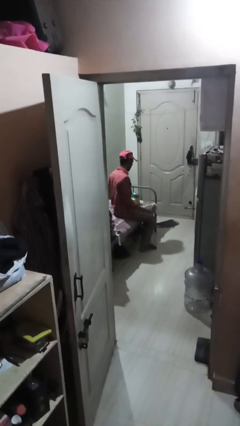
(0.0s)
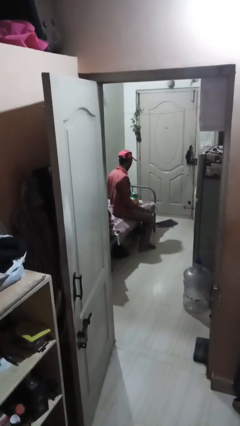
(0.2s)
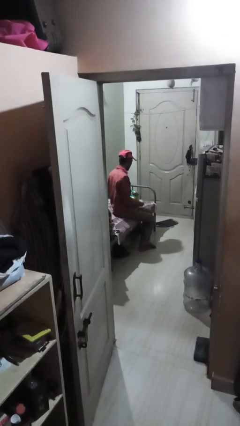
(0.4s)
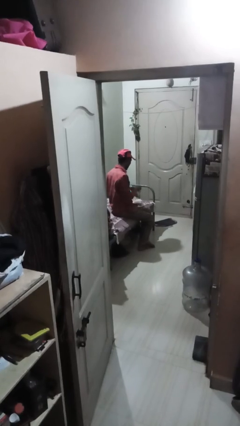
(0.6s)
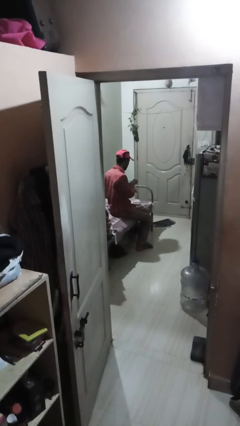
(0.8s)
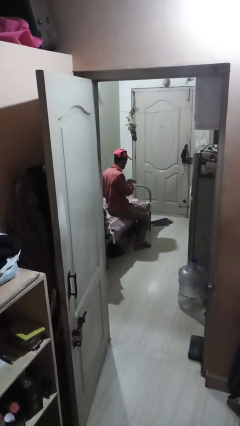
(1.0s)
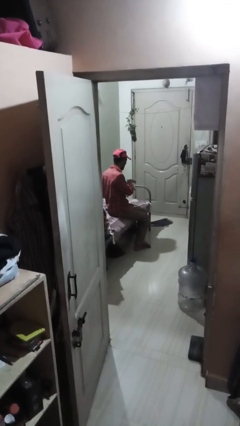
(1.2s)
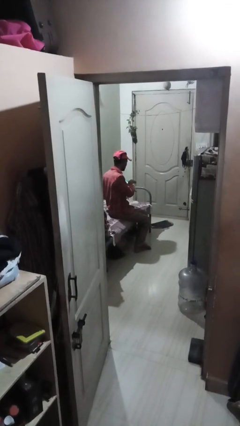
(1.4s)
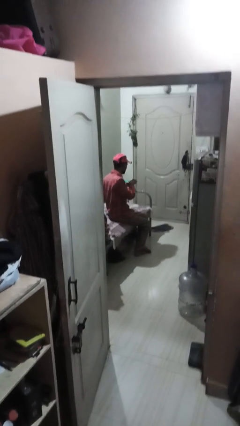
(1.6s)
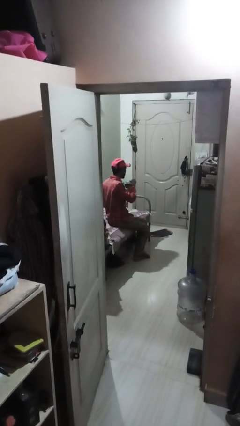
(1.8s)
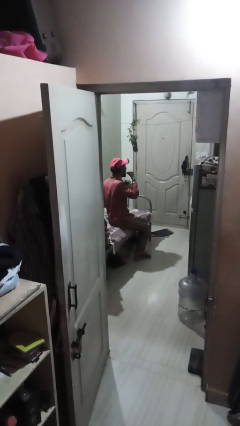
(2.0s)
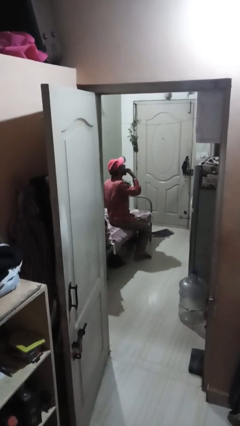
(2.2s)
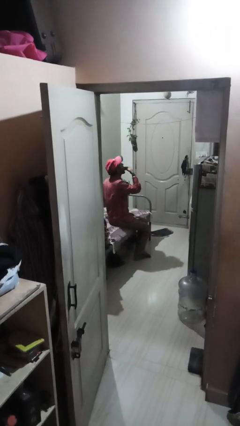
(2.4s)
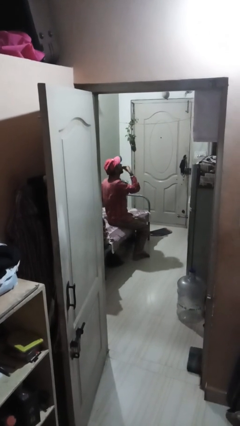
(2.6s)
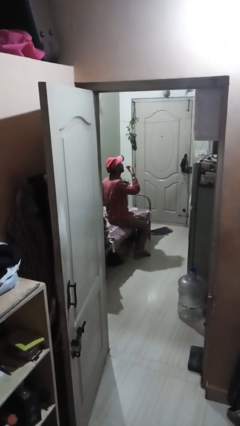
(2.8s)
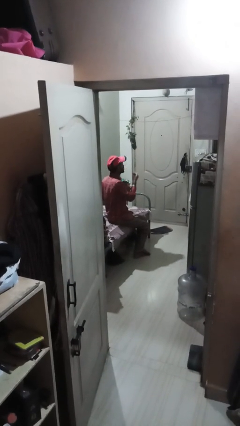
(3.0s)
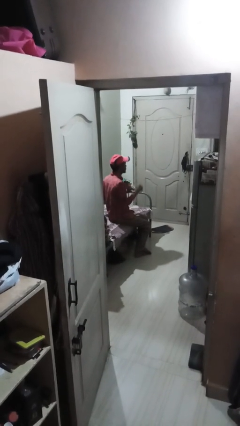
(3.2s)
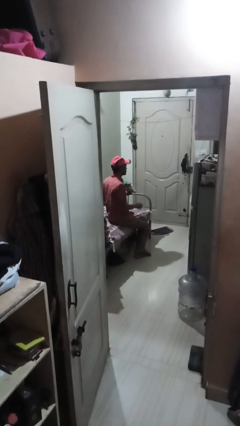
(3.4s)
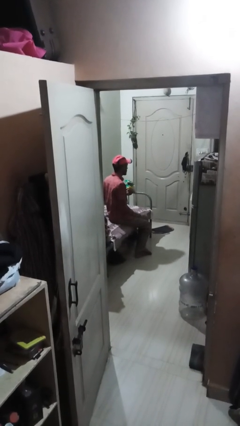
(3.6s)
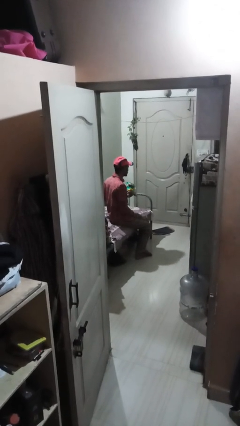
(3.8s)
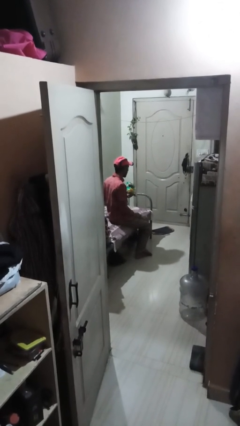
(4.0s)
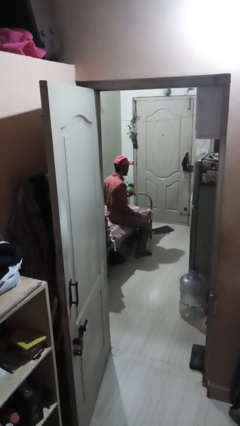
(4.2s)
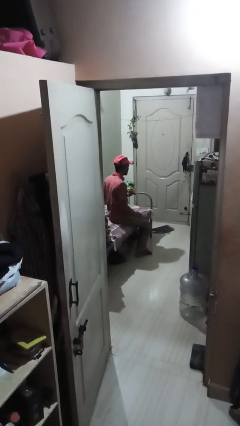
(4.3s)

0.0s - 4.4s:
person eats snack from bag

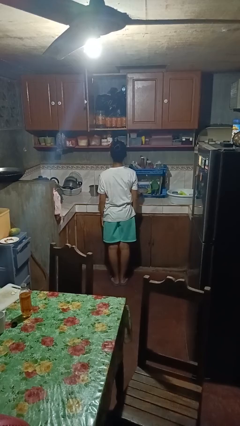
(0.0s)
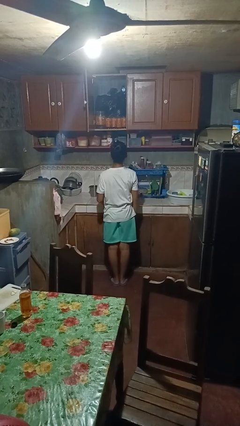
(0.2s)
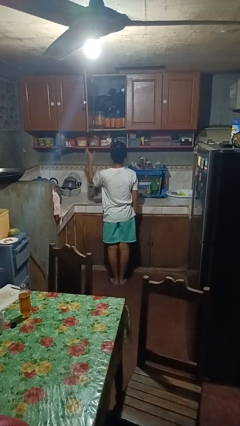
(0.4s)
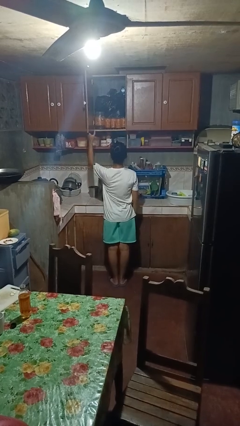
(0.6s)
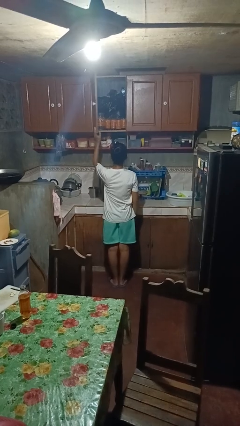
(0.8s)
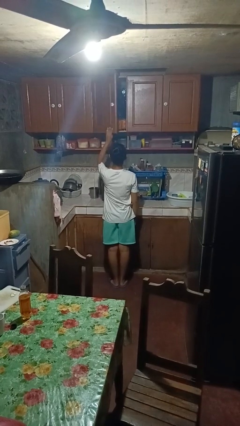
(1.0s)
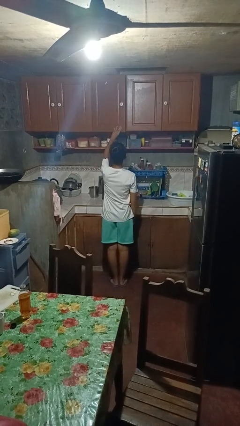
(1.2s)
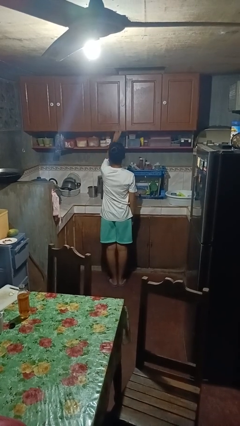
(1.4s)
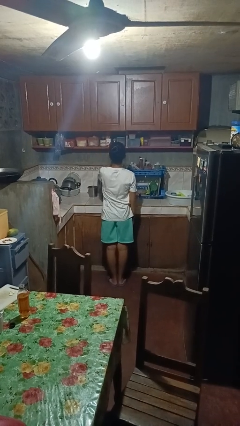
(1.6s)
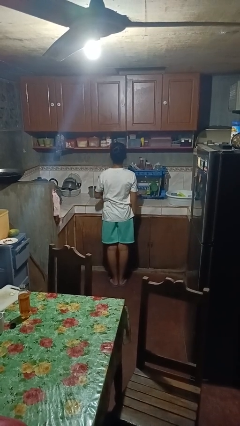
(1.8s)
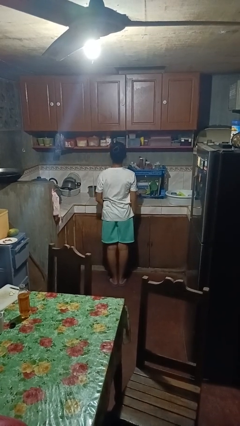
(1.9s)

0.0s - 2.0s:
person closes cabinet

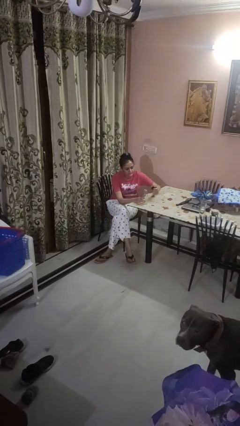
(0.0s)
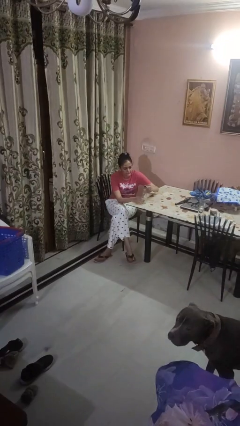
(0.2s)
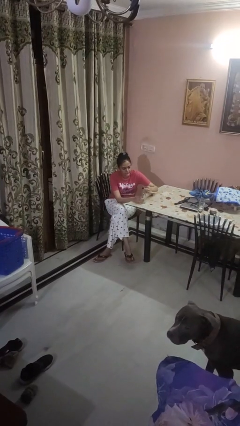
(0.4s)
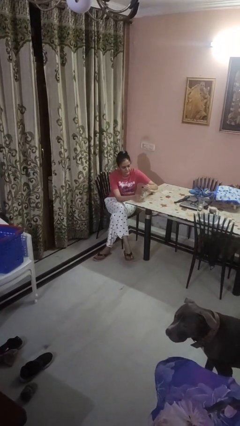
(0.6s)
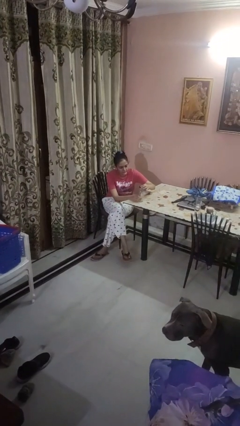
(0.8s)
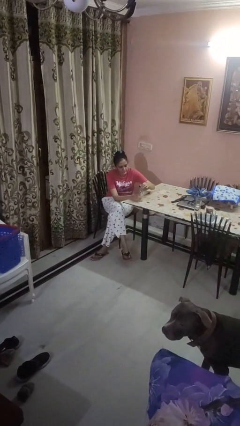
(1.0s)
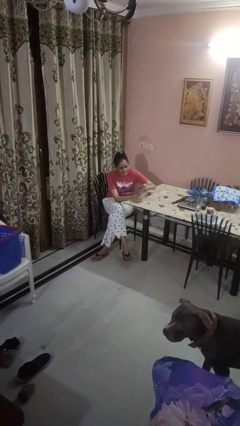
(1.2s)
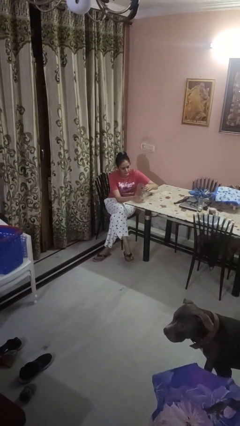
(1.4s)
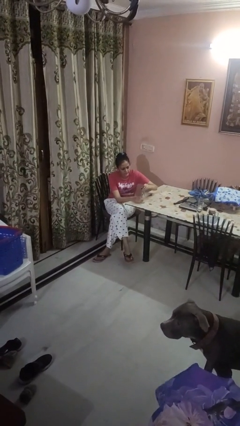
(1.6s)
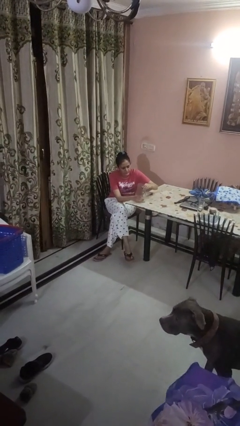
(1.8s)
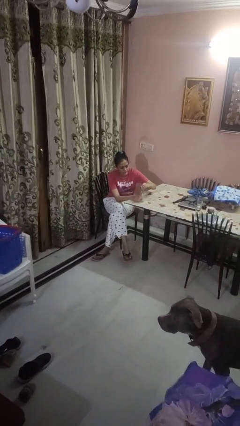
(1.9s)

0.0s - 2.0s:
person screws lid to bottle

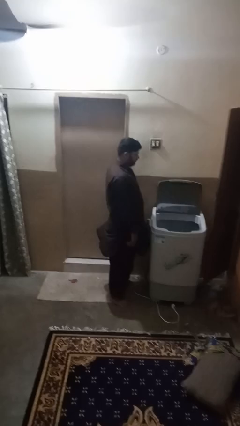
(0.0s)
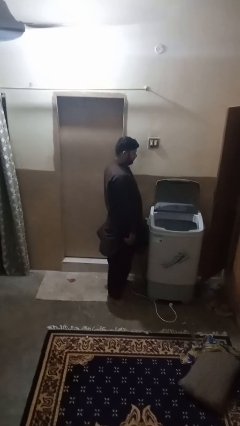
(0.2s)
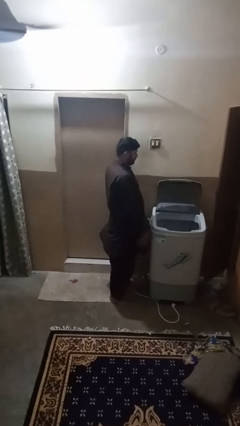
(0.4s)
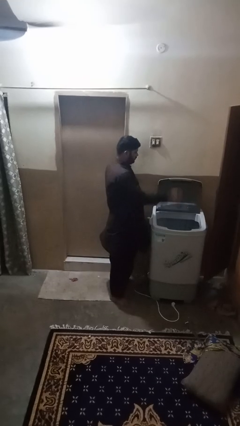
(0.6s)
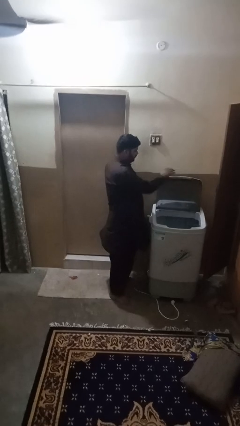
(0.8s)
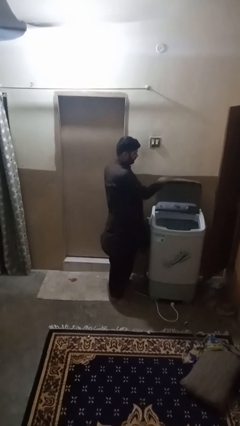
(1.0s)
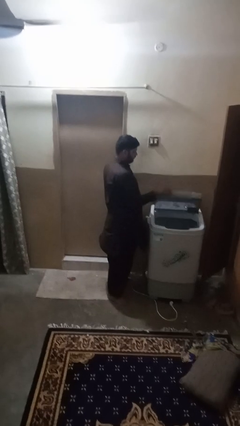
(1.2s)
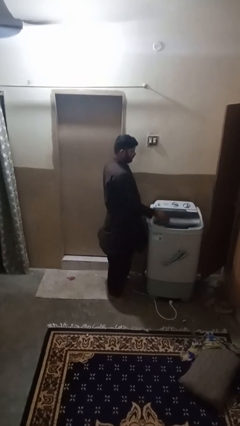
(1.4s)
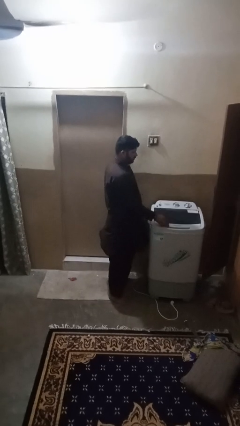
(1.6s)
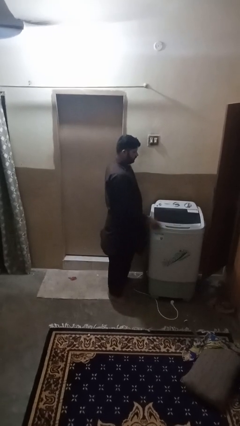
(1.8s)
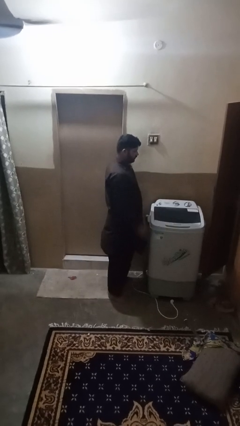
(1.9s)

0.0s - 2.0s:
person closes clothes washer

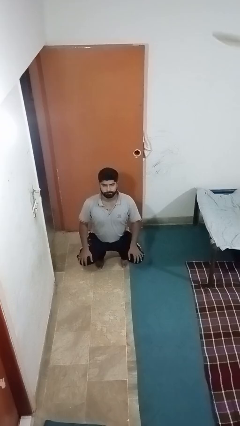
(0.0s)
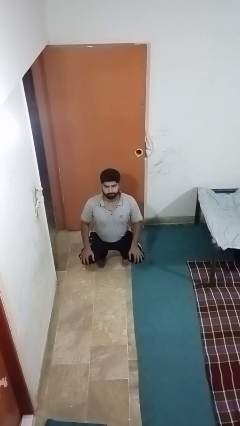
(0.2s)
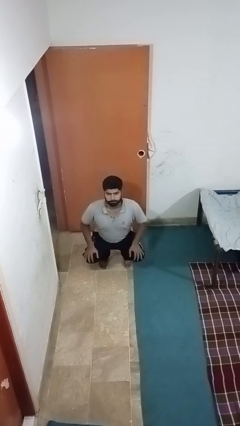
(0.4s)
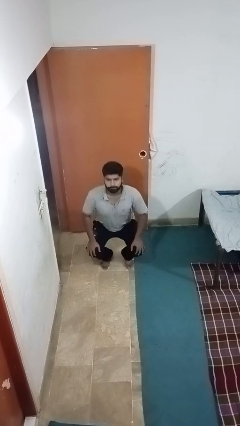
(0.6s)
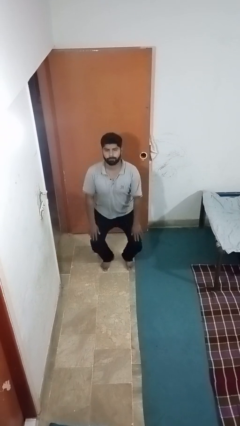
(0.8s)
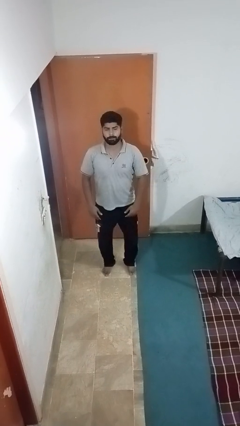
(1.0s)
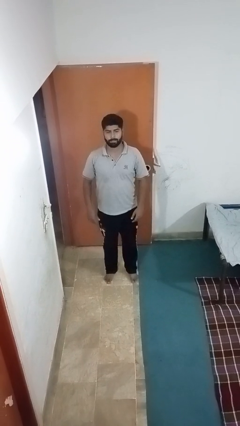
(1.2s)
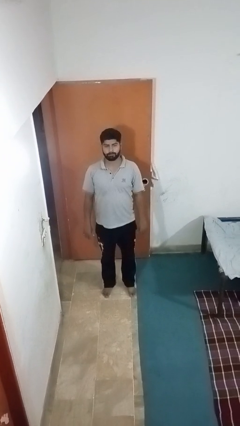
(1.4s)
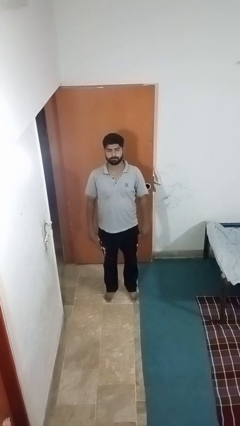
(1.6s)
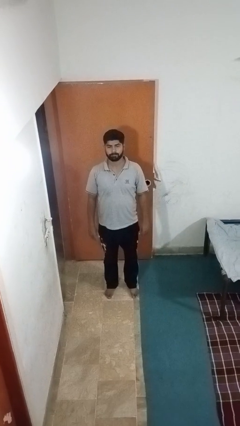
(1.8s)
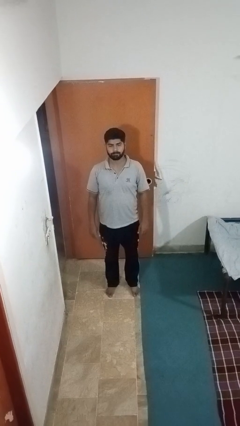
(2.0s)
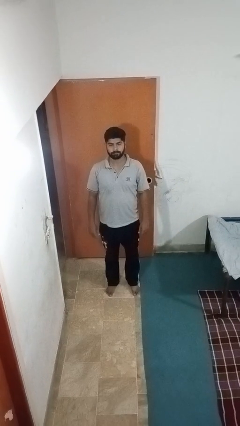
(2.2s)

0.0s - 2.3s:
person stands up

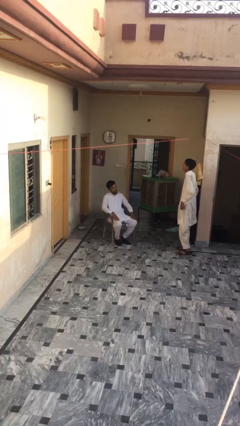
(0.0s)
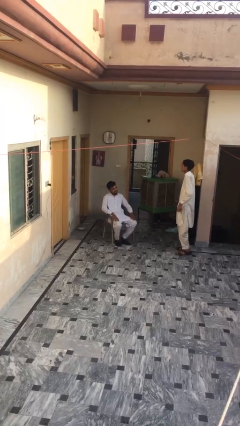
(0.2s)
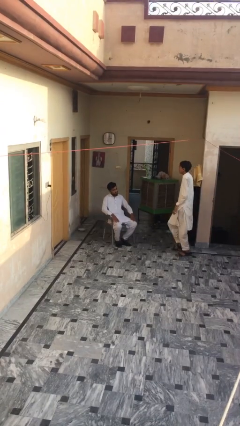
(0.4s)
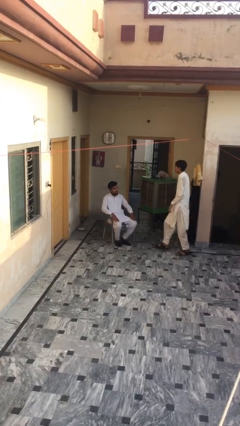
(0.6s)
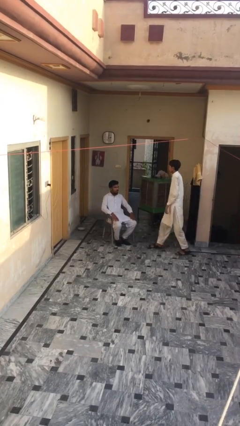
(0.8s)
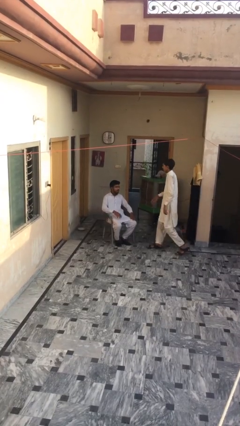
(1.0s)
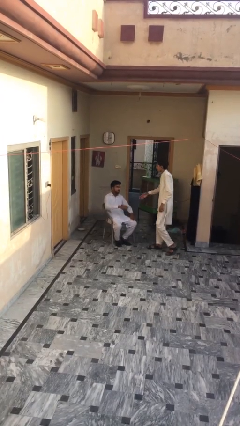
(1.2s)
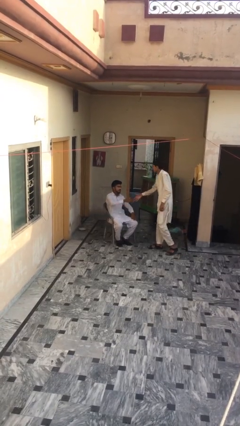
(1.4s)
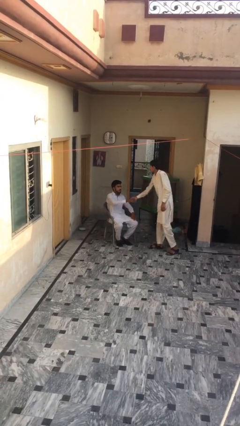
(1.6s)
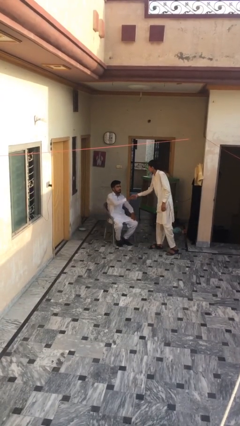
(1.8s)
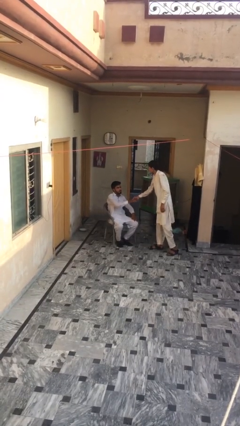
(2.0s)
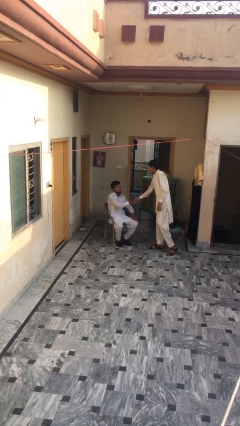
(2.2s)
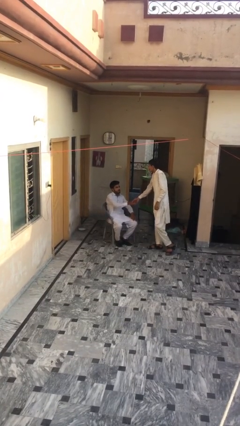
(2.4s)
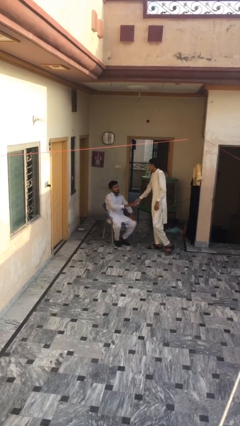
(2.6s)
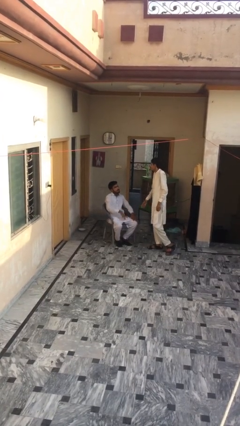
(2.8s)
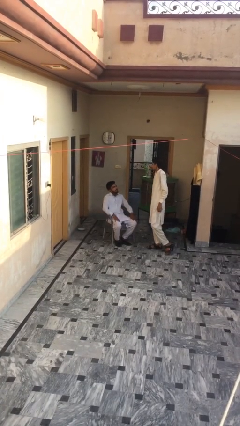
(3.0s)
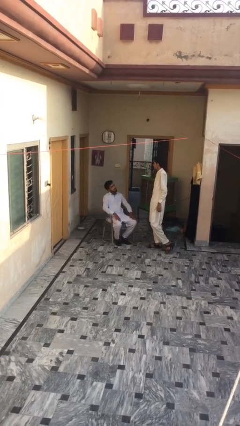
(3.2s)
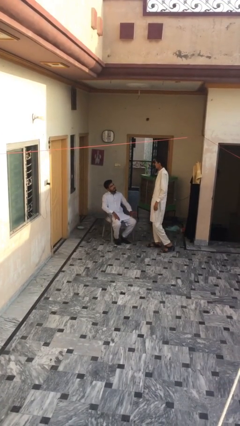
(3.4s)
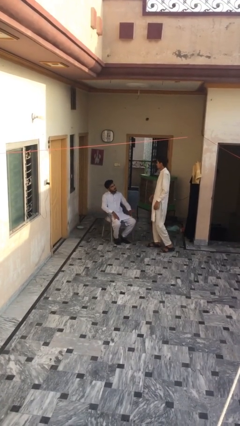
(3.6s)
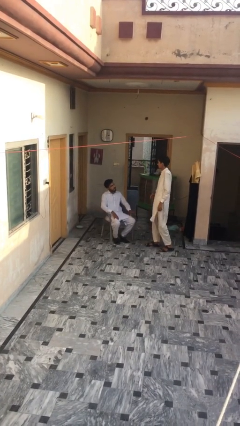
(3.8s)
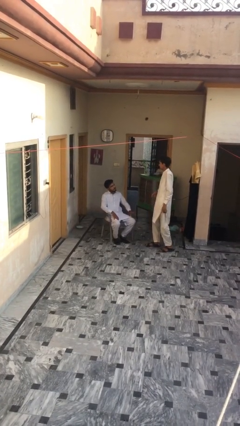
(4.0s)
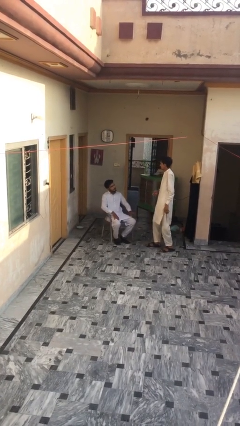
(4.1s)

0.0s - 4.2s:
person shakes hand

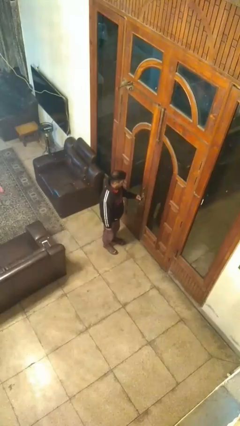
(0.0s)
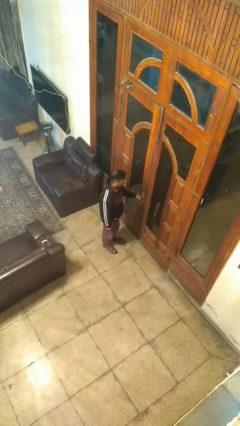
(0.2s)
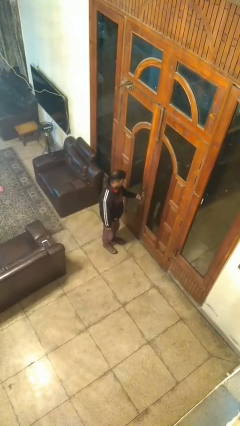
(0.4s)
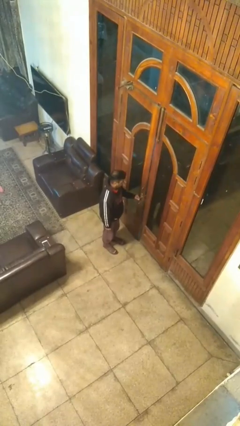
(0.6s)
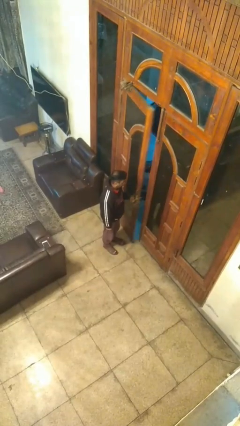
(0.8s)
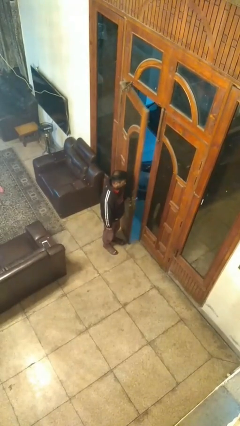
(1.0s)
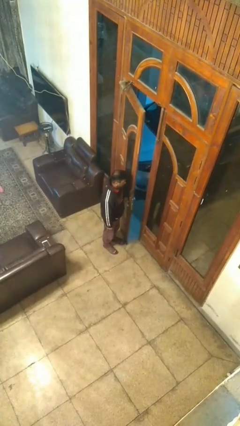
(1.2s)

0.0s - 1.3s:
person opens facility door
